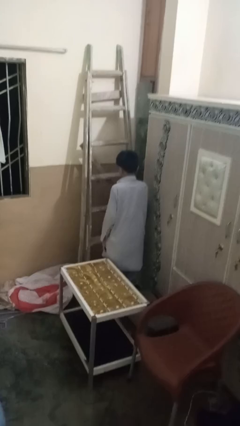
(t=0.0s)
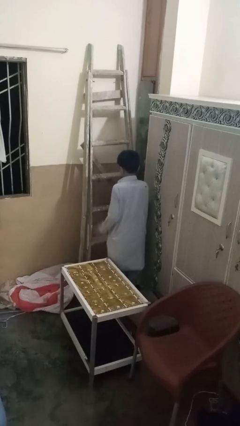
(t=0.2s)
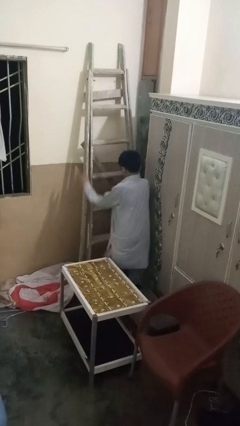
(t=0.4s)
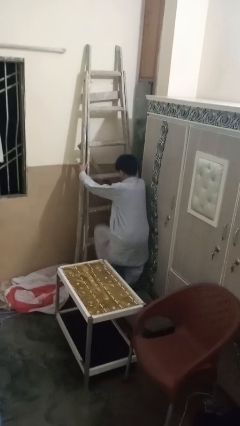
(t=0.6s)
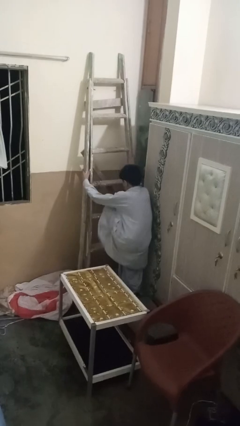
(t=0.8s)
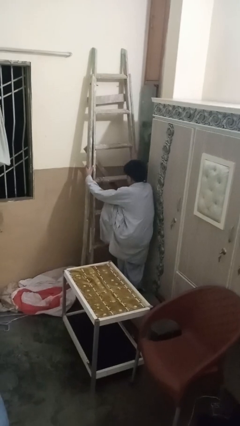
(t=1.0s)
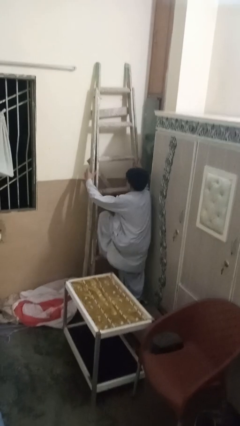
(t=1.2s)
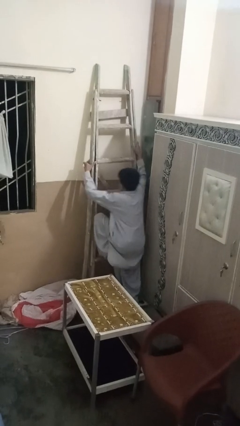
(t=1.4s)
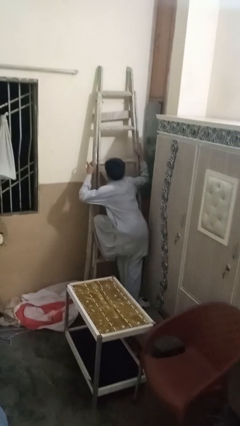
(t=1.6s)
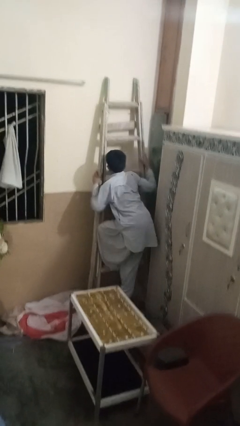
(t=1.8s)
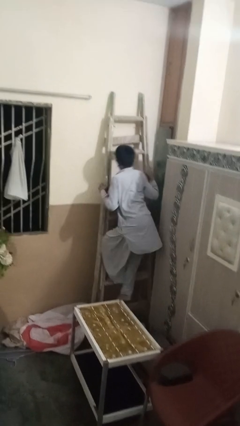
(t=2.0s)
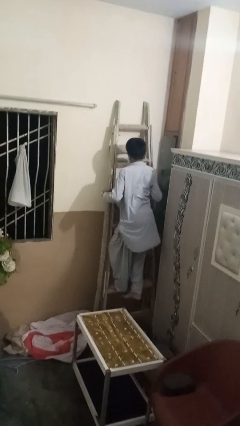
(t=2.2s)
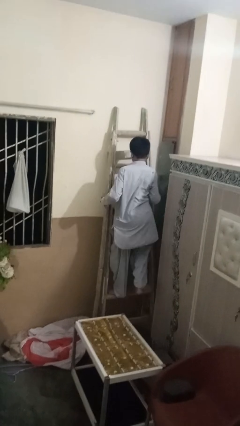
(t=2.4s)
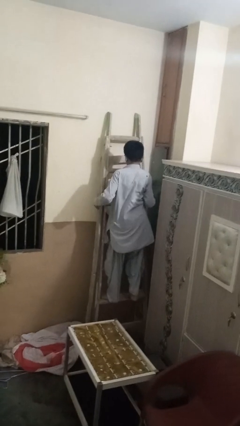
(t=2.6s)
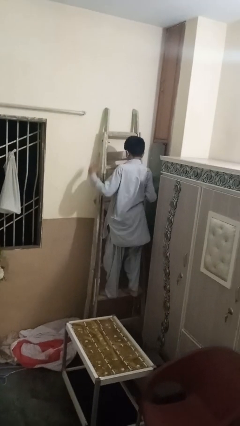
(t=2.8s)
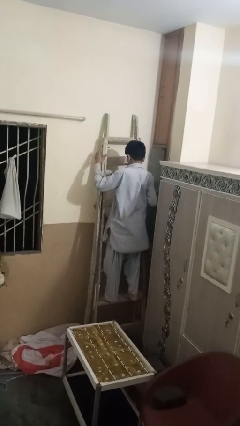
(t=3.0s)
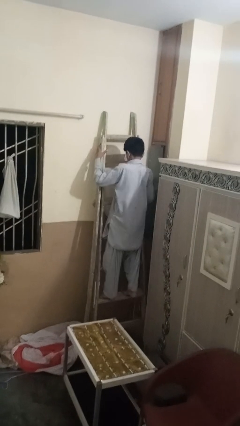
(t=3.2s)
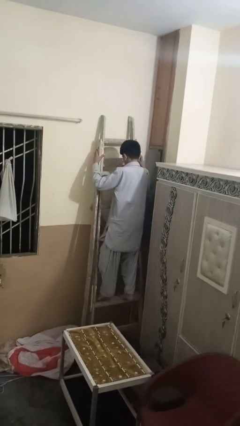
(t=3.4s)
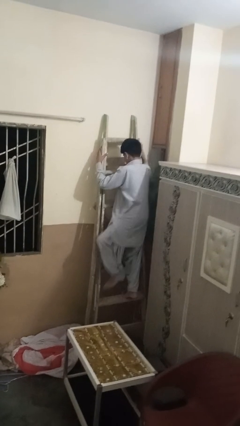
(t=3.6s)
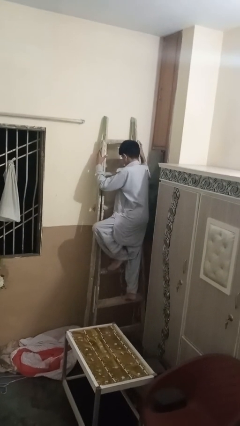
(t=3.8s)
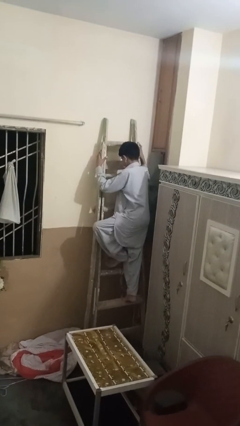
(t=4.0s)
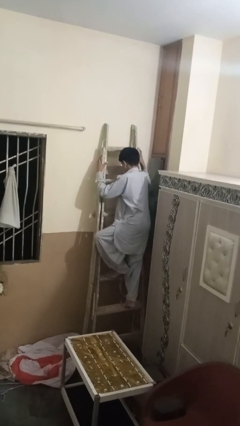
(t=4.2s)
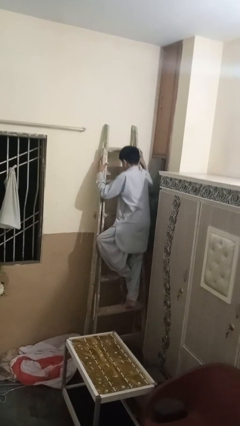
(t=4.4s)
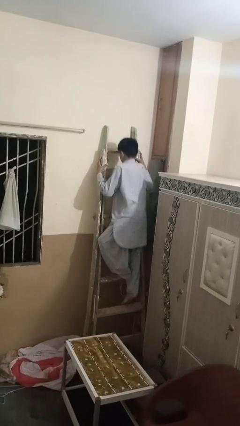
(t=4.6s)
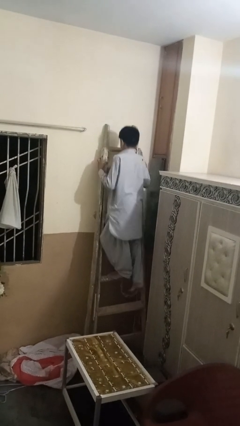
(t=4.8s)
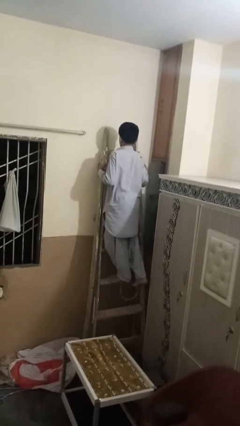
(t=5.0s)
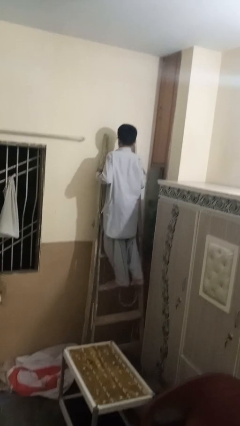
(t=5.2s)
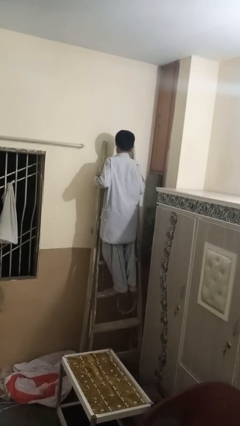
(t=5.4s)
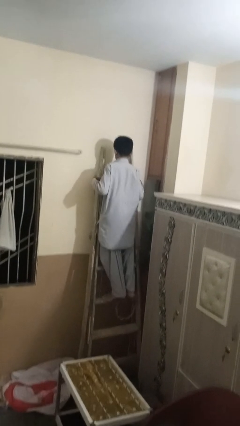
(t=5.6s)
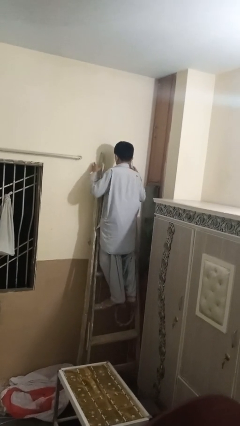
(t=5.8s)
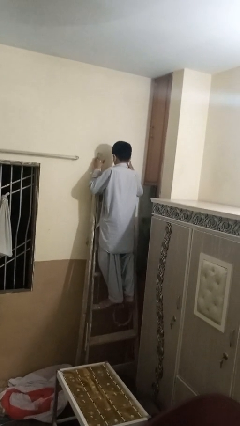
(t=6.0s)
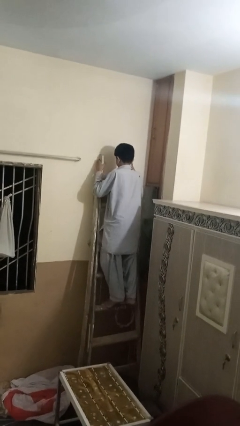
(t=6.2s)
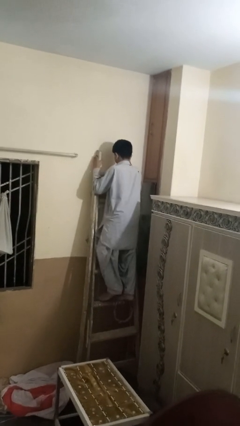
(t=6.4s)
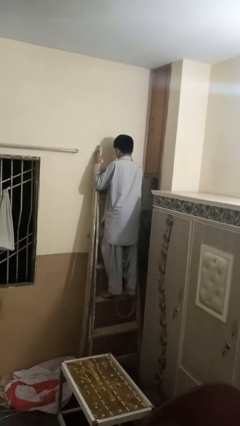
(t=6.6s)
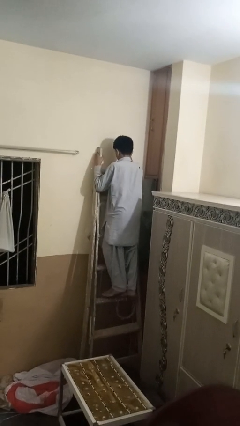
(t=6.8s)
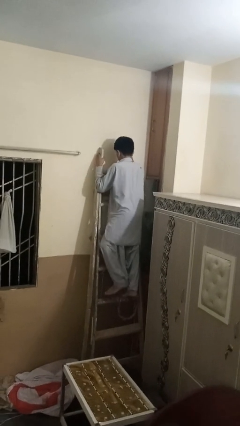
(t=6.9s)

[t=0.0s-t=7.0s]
person climbs up ladder

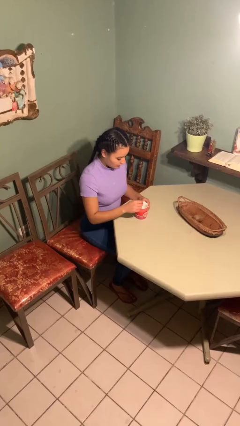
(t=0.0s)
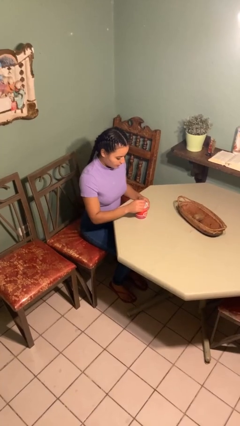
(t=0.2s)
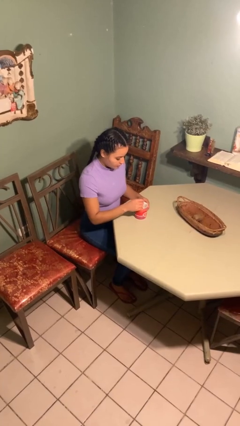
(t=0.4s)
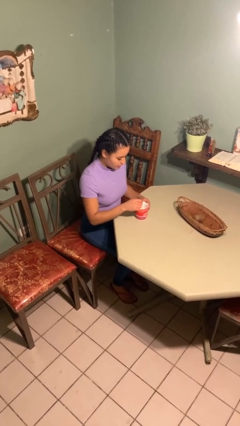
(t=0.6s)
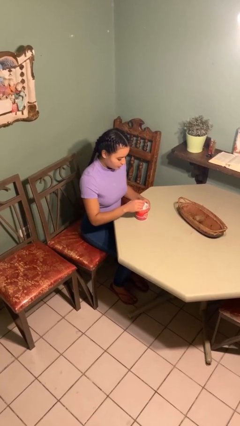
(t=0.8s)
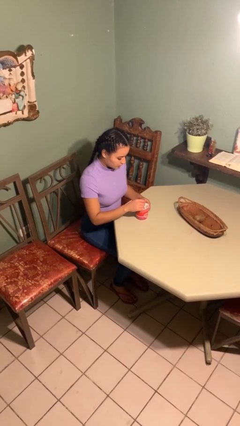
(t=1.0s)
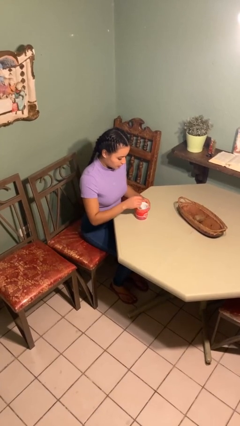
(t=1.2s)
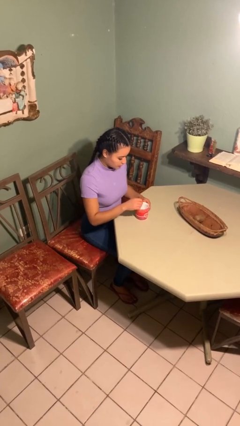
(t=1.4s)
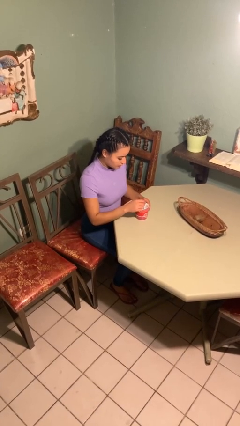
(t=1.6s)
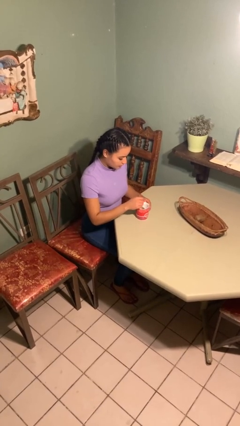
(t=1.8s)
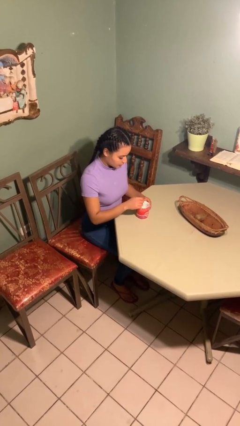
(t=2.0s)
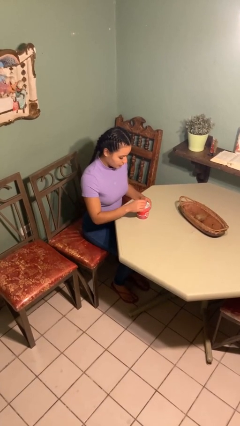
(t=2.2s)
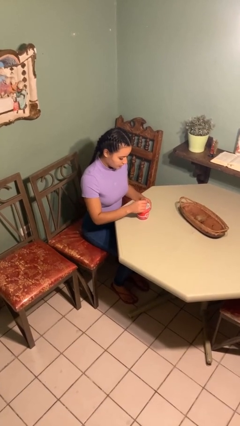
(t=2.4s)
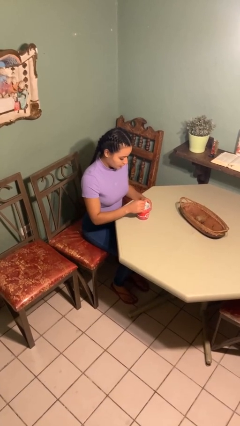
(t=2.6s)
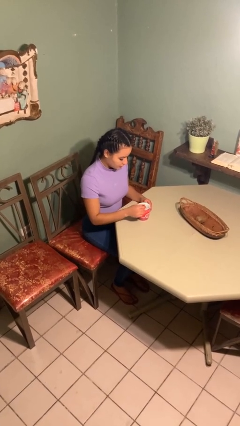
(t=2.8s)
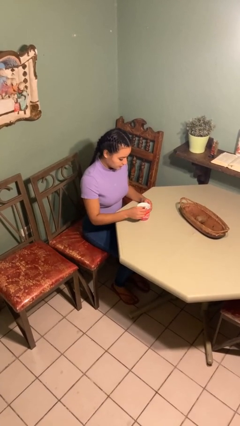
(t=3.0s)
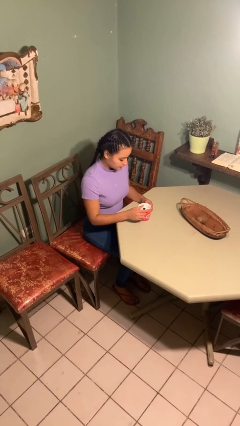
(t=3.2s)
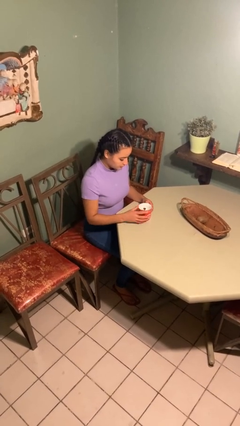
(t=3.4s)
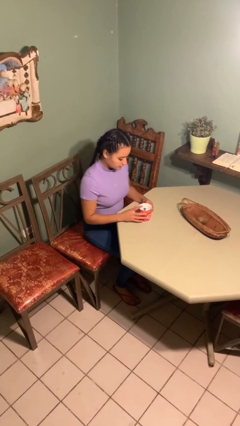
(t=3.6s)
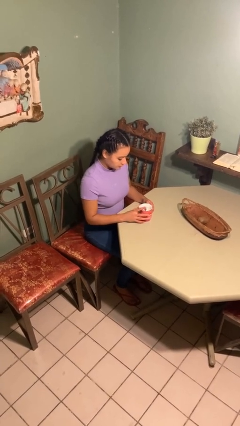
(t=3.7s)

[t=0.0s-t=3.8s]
person stirs mug

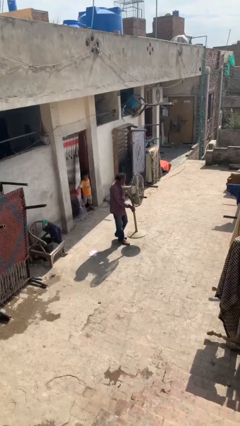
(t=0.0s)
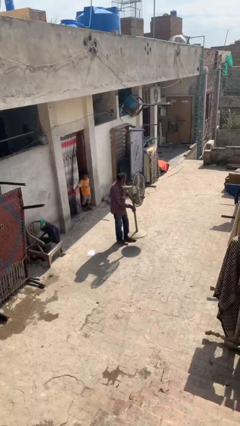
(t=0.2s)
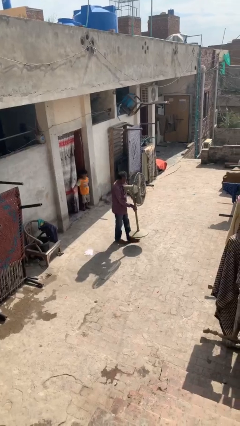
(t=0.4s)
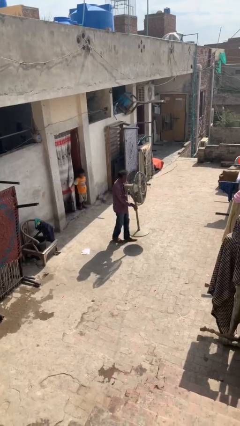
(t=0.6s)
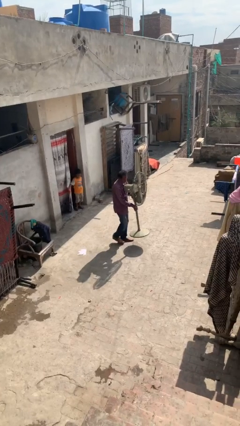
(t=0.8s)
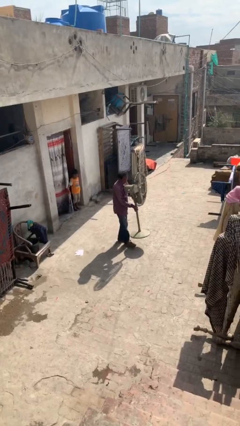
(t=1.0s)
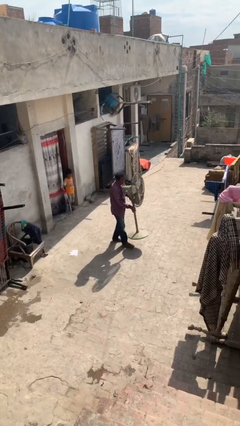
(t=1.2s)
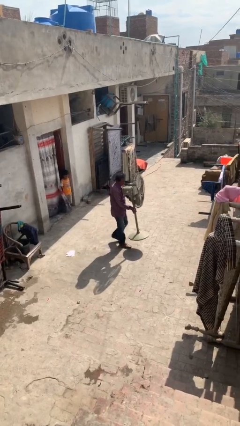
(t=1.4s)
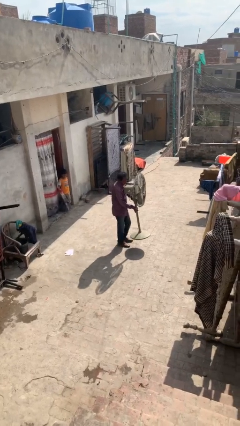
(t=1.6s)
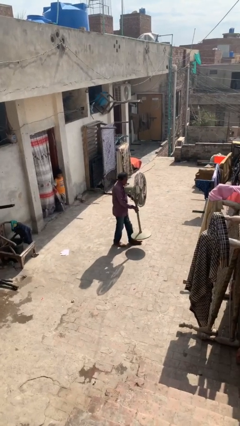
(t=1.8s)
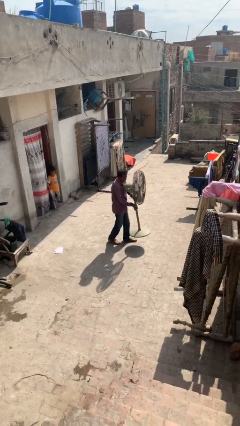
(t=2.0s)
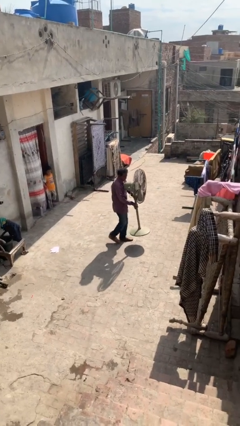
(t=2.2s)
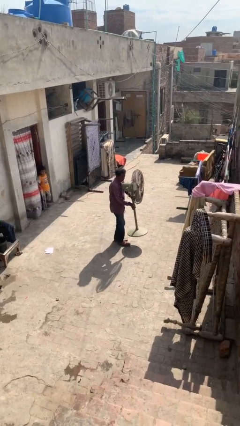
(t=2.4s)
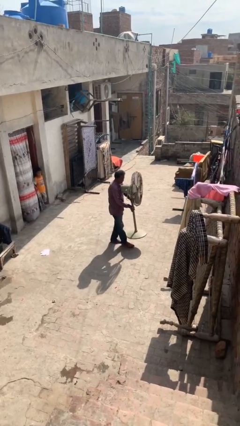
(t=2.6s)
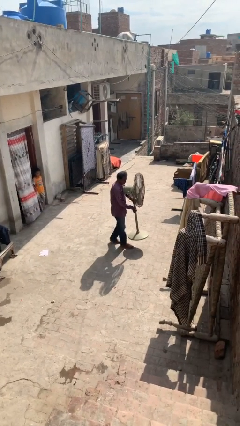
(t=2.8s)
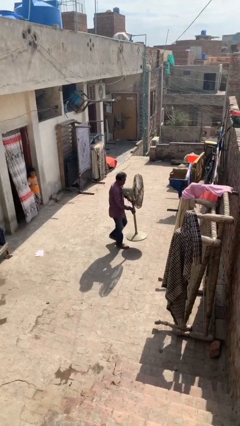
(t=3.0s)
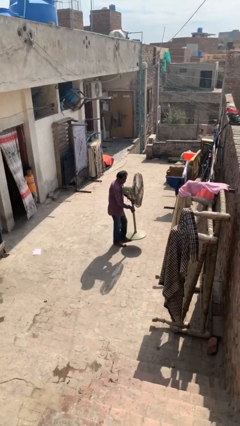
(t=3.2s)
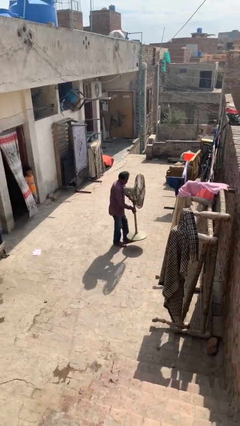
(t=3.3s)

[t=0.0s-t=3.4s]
person carries heavy object

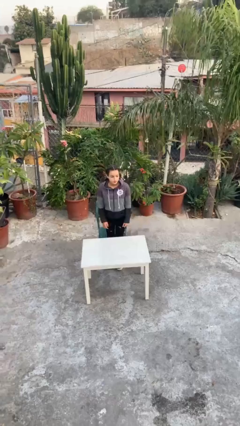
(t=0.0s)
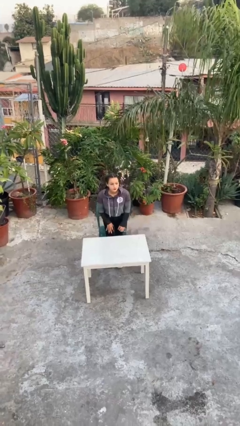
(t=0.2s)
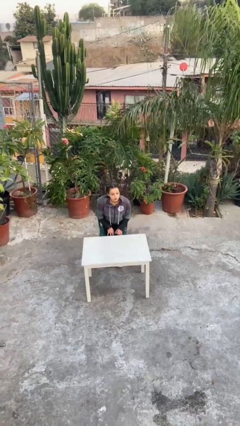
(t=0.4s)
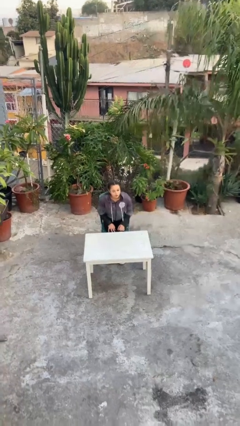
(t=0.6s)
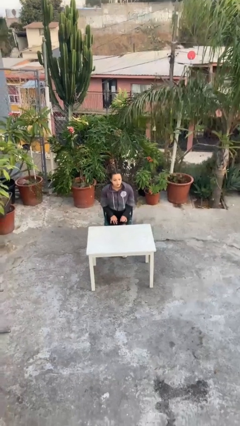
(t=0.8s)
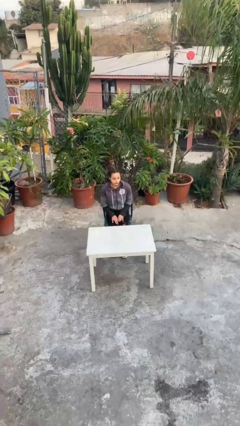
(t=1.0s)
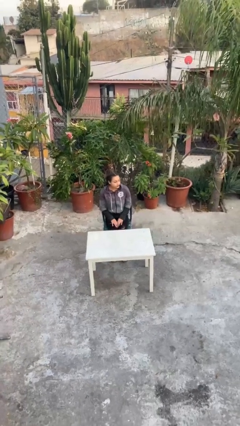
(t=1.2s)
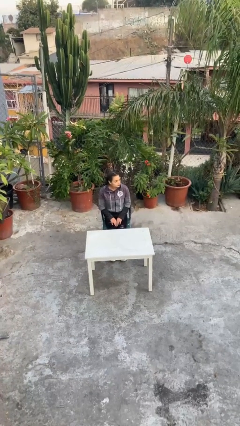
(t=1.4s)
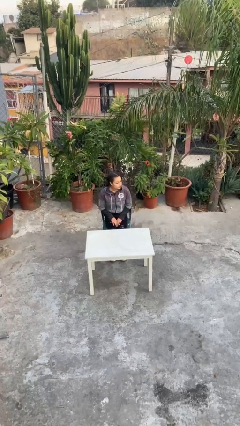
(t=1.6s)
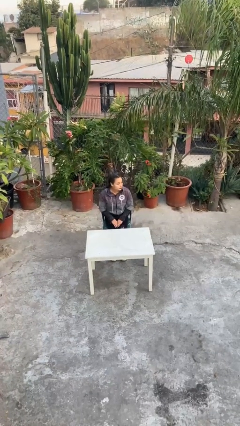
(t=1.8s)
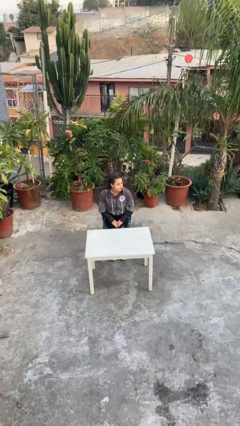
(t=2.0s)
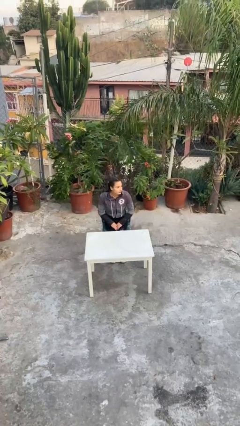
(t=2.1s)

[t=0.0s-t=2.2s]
person sits down

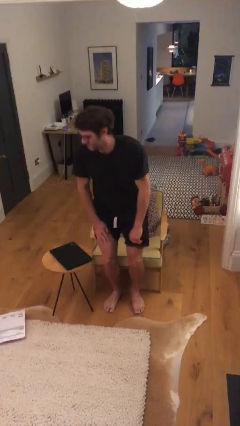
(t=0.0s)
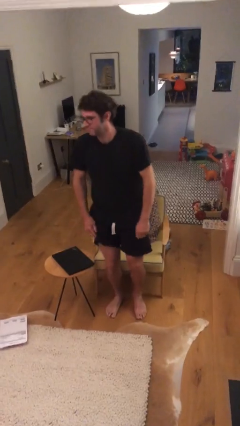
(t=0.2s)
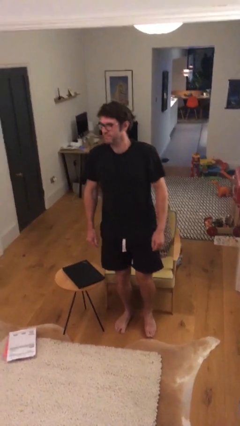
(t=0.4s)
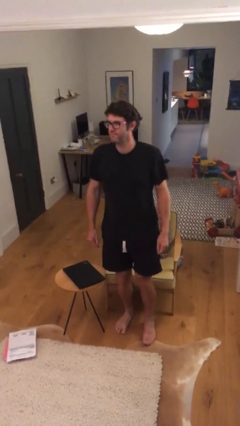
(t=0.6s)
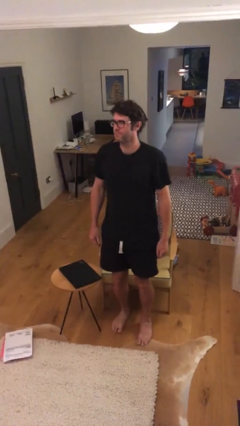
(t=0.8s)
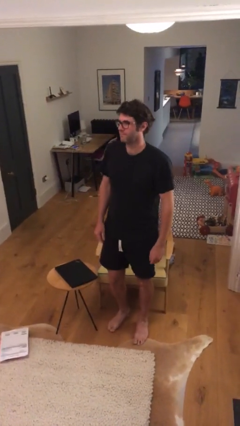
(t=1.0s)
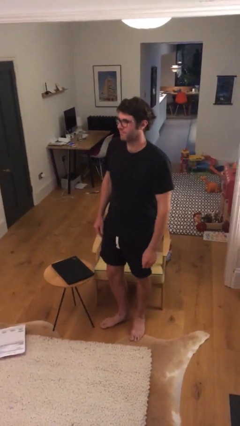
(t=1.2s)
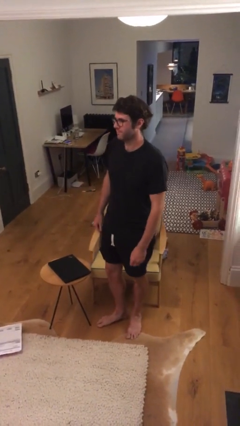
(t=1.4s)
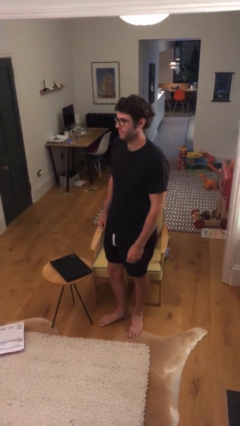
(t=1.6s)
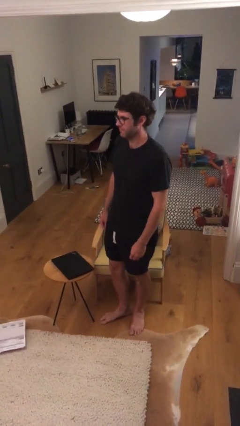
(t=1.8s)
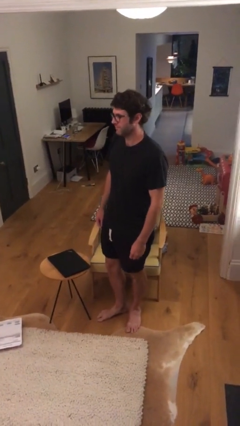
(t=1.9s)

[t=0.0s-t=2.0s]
person stands up
